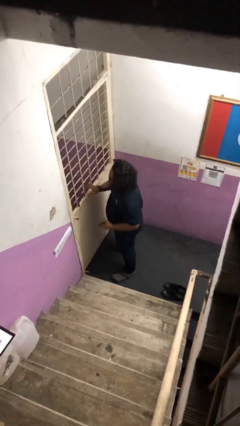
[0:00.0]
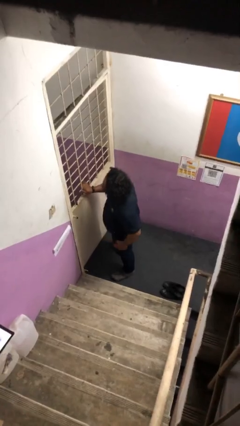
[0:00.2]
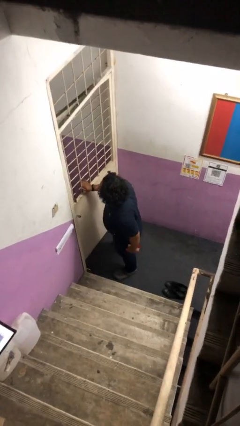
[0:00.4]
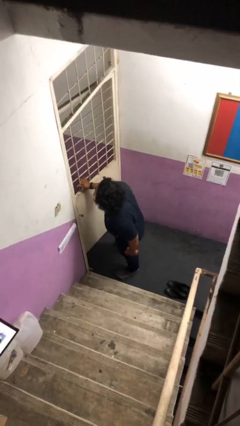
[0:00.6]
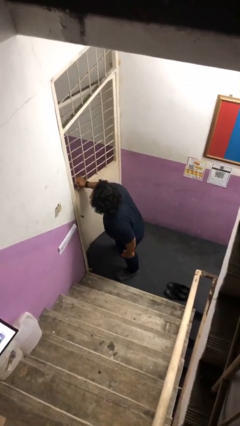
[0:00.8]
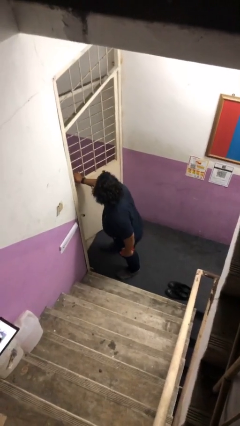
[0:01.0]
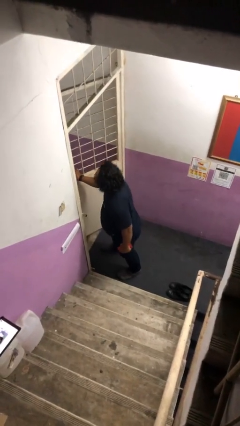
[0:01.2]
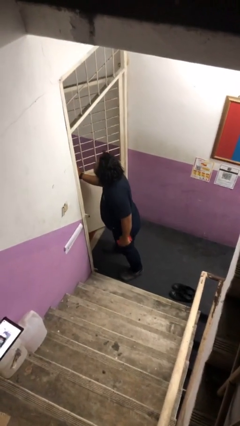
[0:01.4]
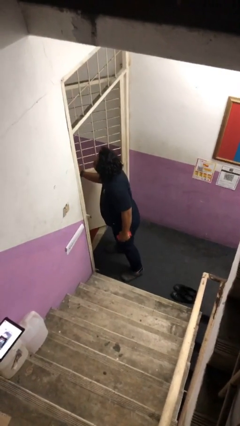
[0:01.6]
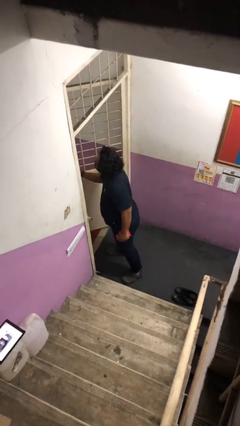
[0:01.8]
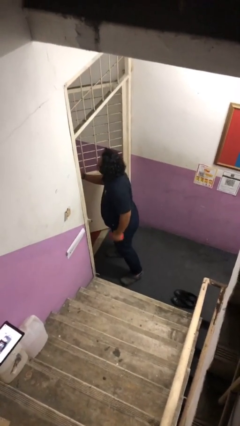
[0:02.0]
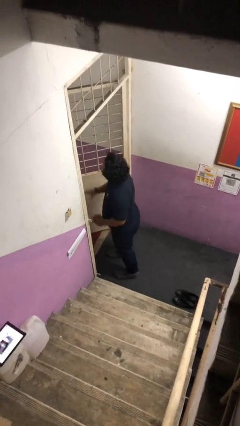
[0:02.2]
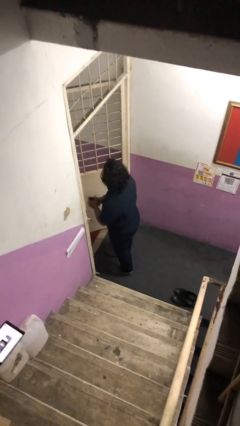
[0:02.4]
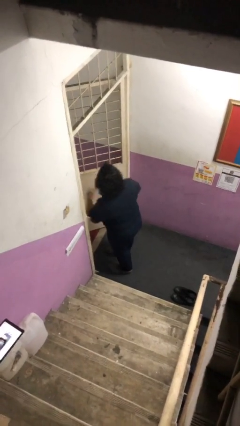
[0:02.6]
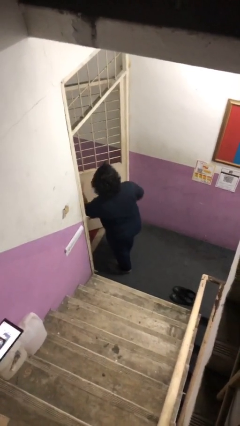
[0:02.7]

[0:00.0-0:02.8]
person opens facility door

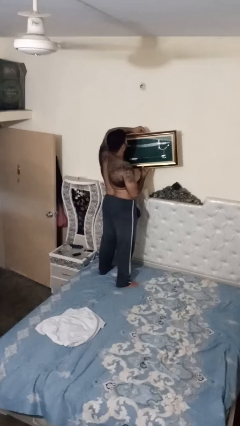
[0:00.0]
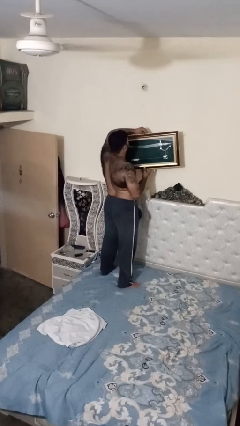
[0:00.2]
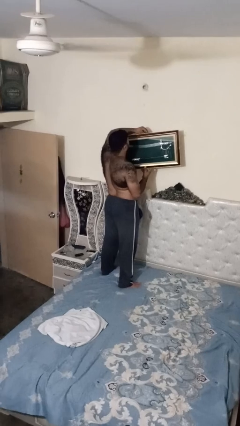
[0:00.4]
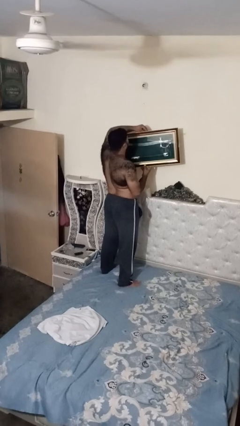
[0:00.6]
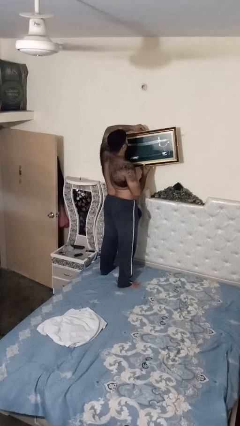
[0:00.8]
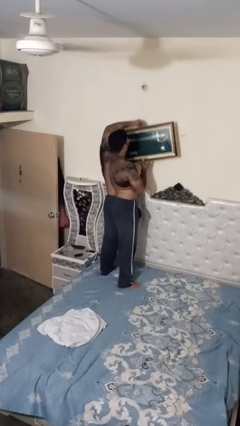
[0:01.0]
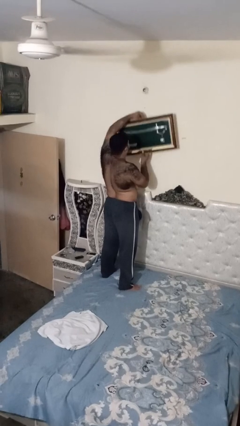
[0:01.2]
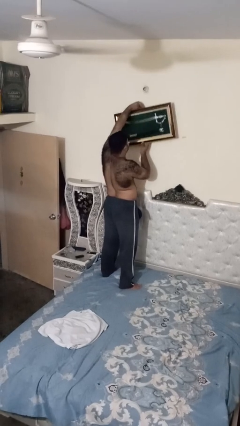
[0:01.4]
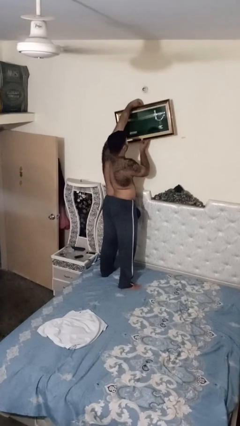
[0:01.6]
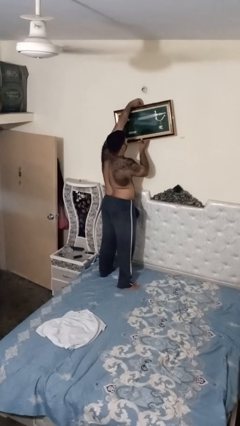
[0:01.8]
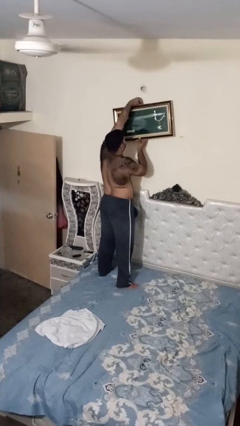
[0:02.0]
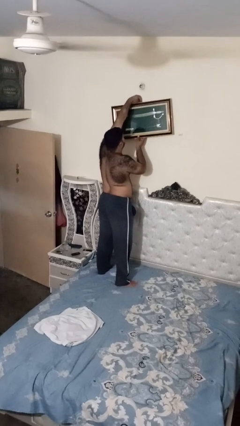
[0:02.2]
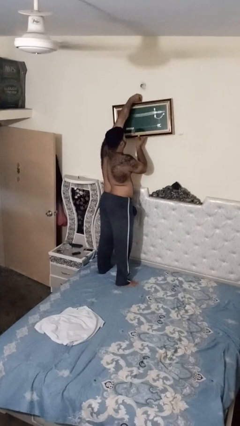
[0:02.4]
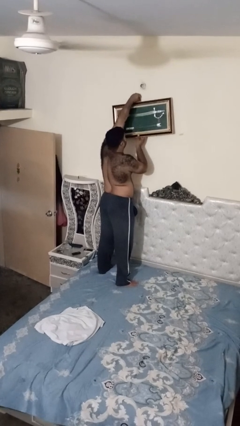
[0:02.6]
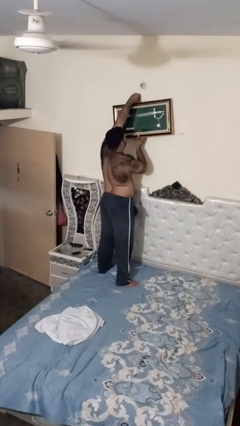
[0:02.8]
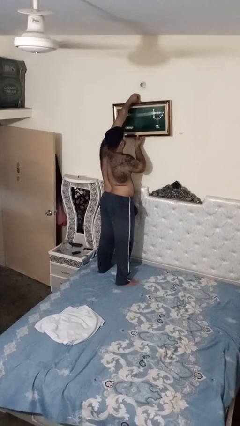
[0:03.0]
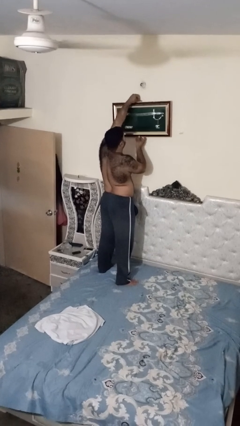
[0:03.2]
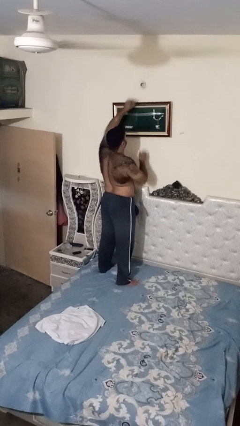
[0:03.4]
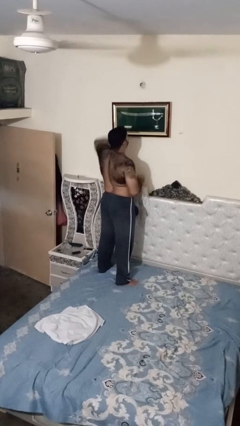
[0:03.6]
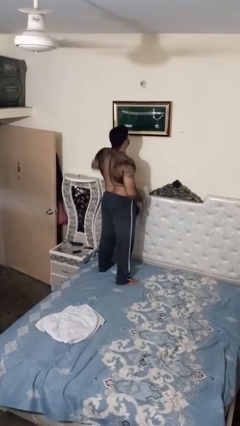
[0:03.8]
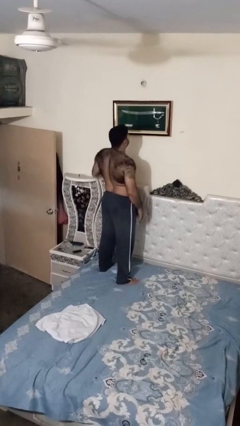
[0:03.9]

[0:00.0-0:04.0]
person puts up picture frame

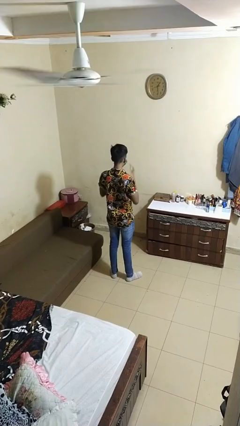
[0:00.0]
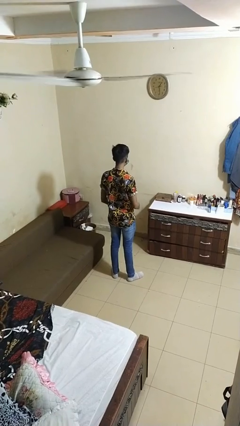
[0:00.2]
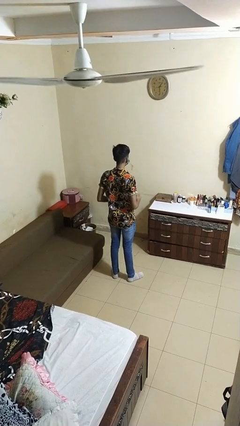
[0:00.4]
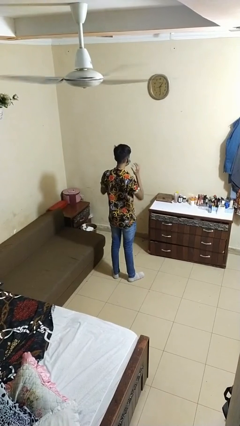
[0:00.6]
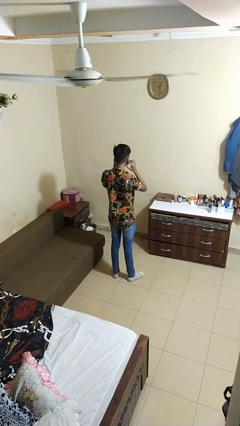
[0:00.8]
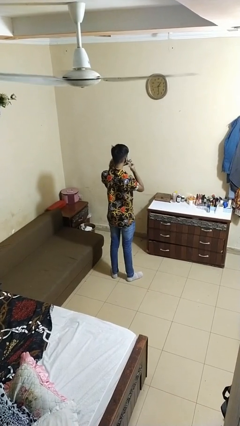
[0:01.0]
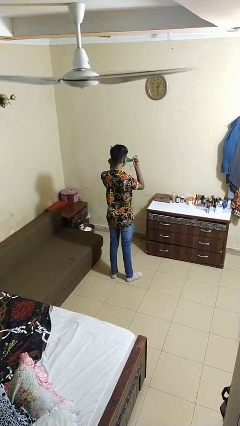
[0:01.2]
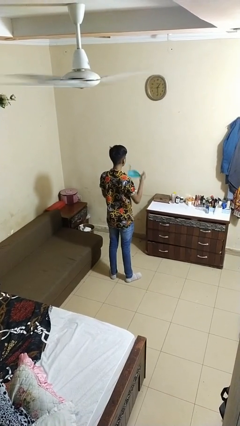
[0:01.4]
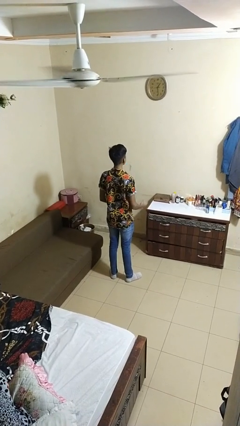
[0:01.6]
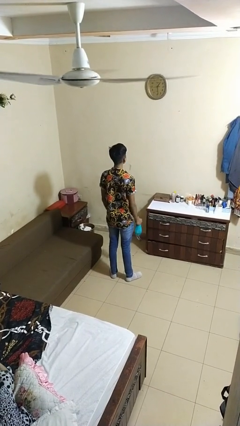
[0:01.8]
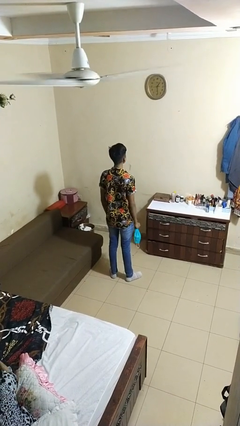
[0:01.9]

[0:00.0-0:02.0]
person takes off facemask

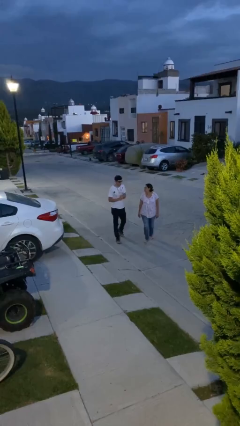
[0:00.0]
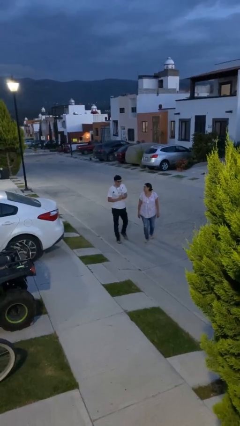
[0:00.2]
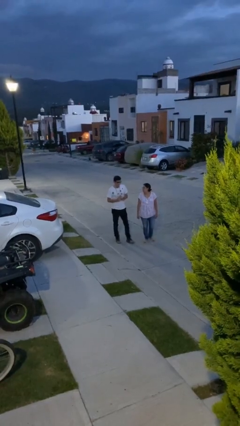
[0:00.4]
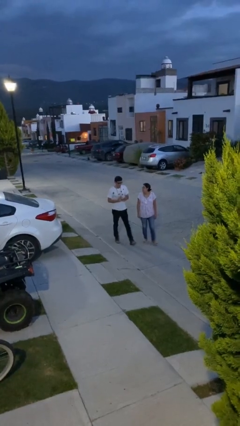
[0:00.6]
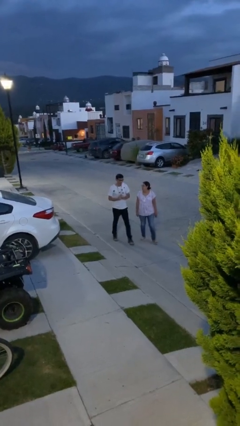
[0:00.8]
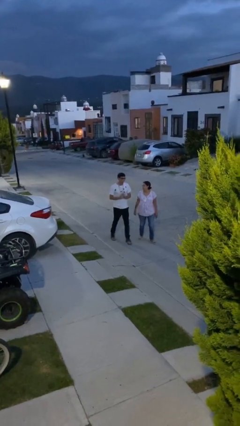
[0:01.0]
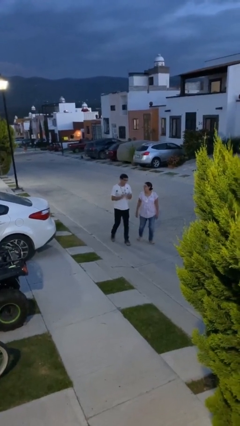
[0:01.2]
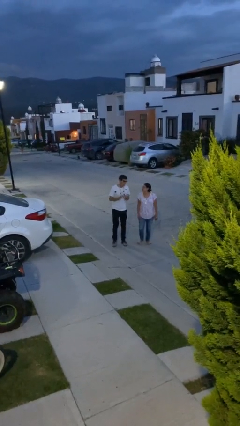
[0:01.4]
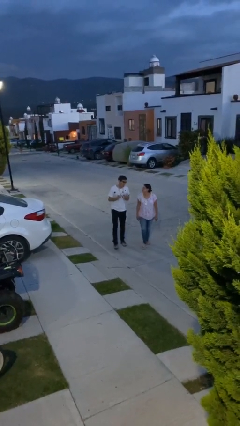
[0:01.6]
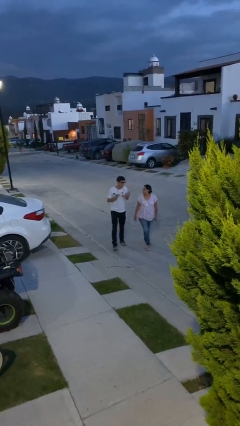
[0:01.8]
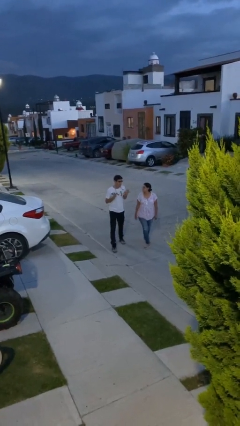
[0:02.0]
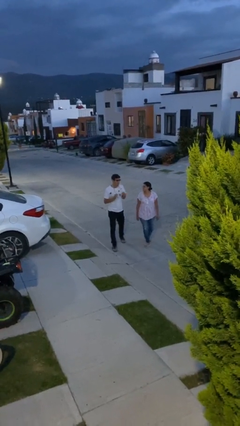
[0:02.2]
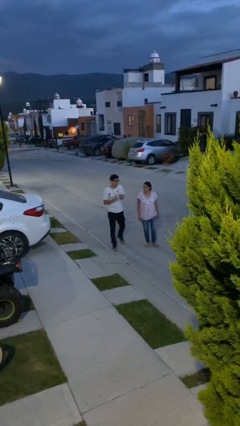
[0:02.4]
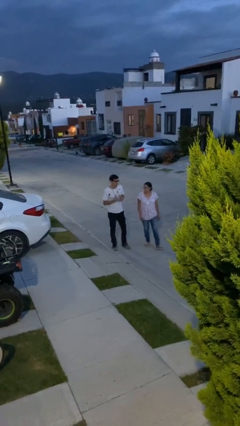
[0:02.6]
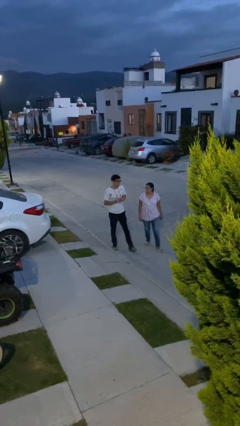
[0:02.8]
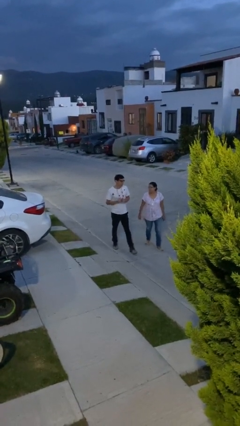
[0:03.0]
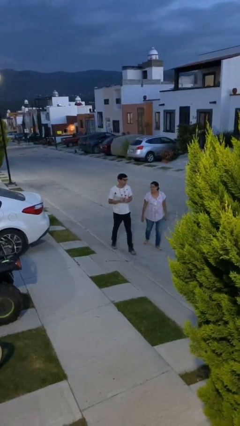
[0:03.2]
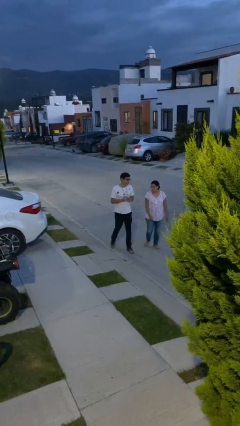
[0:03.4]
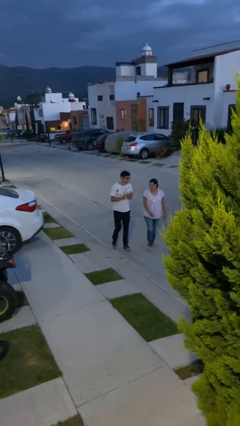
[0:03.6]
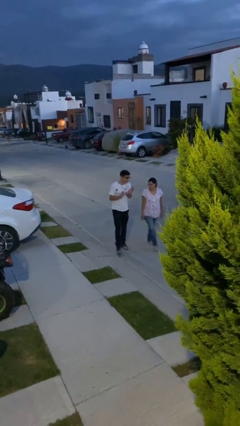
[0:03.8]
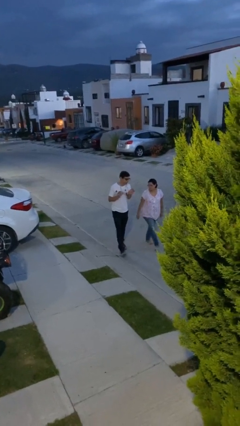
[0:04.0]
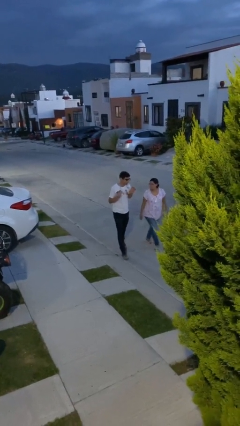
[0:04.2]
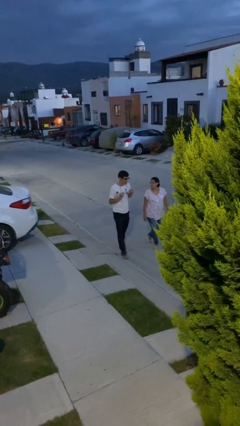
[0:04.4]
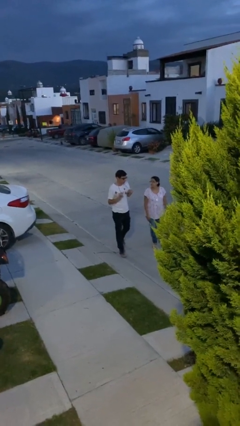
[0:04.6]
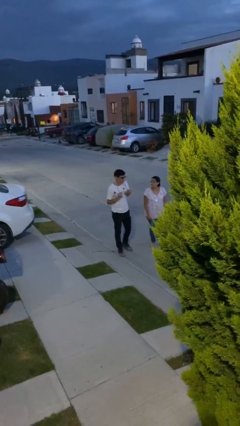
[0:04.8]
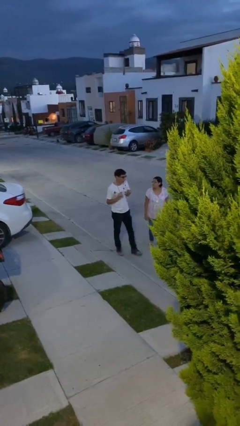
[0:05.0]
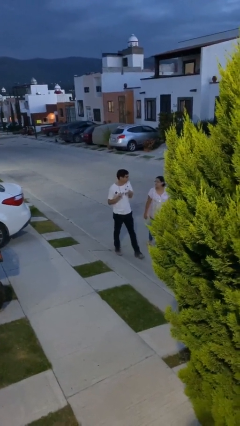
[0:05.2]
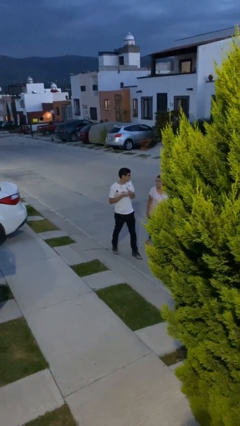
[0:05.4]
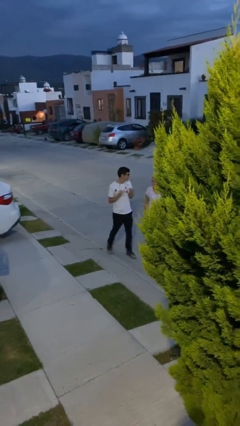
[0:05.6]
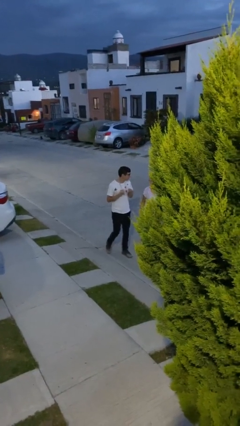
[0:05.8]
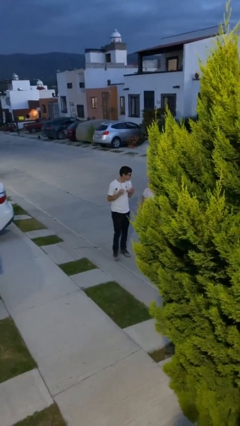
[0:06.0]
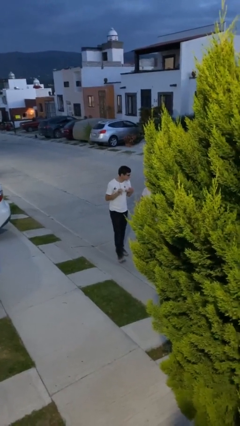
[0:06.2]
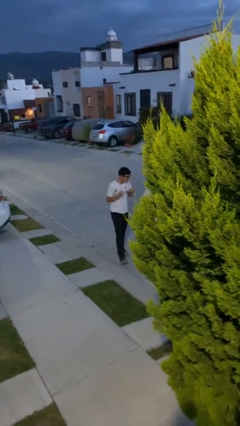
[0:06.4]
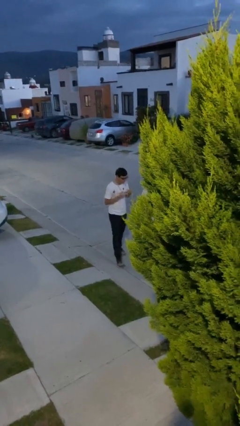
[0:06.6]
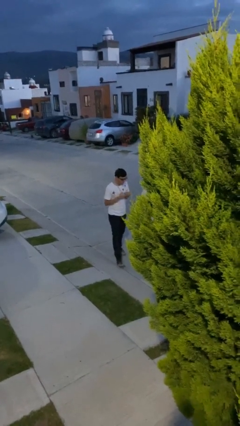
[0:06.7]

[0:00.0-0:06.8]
person talks to person

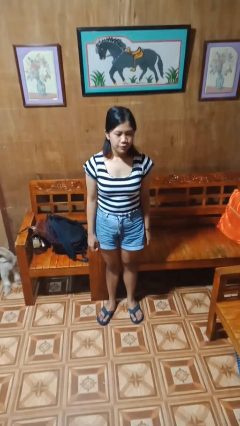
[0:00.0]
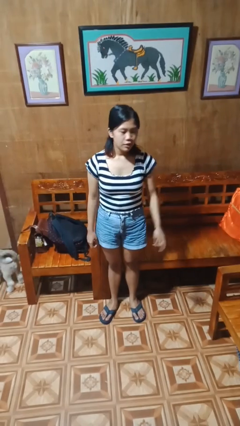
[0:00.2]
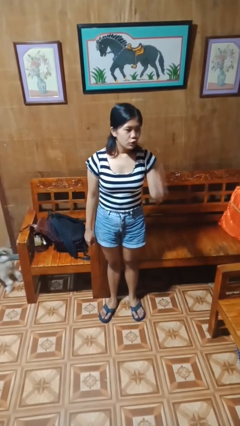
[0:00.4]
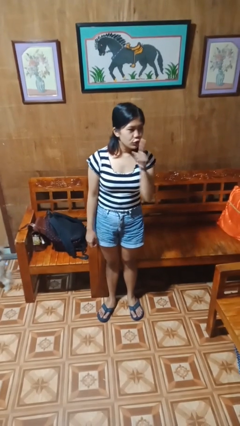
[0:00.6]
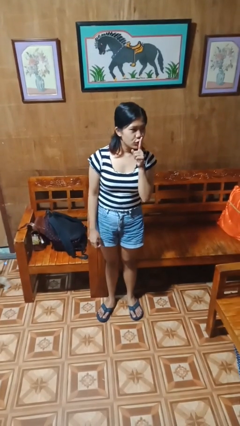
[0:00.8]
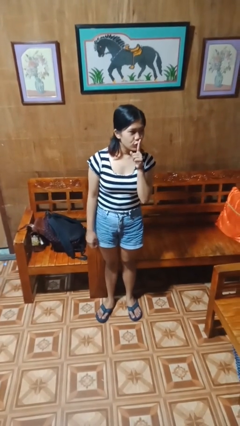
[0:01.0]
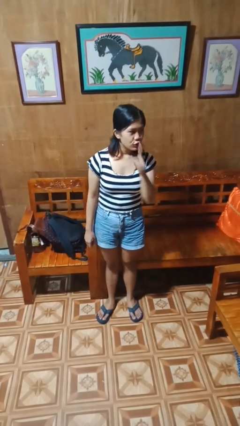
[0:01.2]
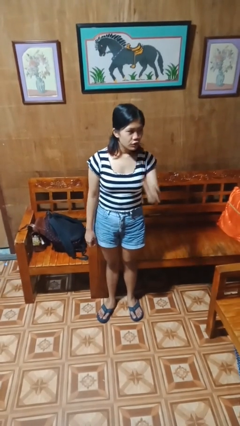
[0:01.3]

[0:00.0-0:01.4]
person gestures be quiet
